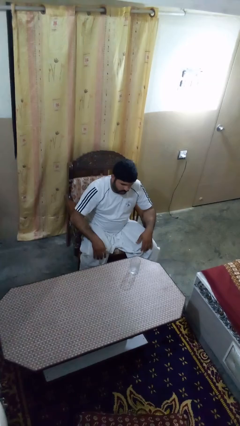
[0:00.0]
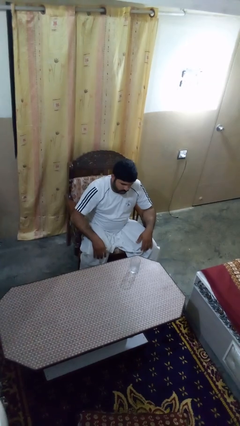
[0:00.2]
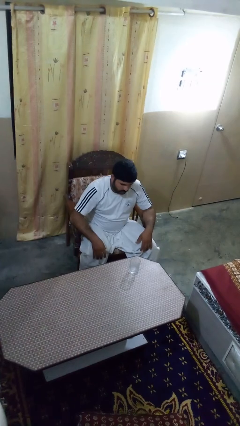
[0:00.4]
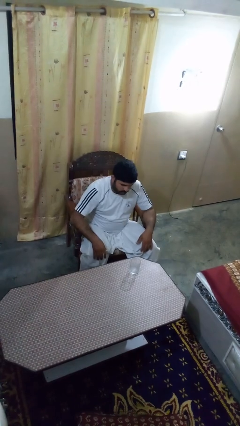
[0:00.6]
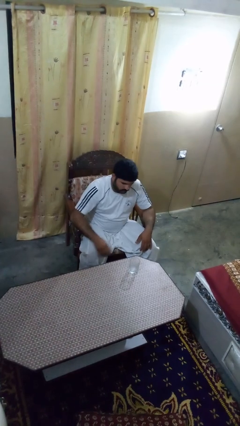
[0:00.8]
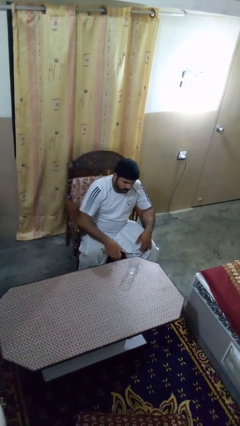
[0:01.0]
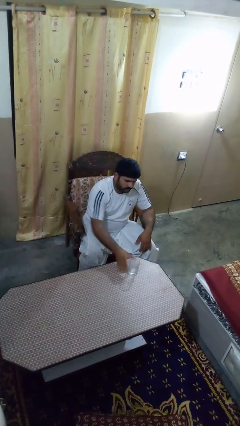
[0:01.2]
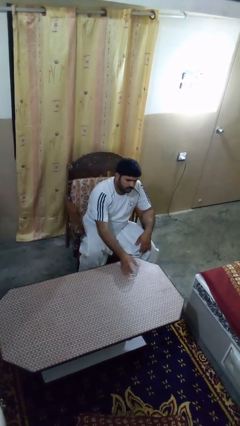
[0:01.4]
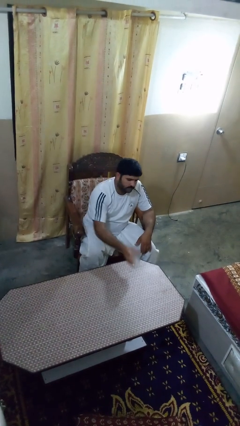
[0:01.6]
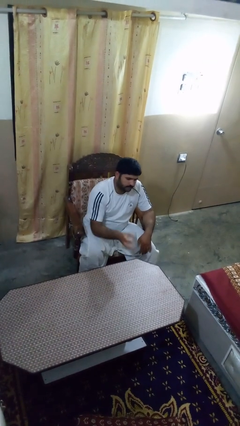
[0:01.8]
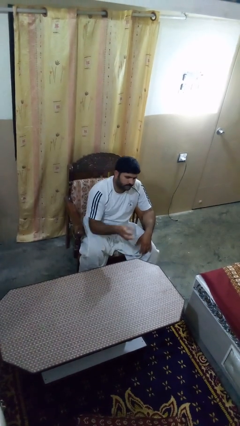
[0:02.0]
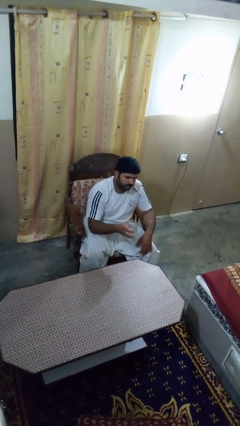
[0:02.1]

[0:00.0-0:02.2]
person picks up object from table

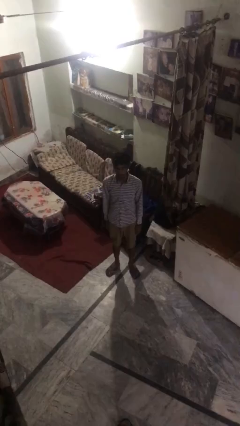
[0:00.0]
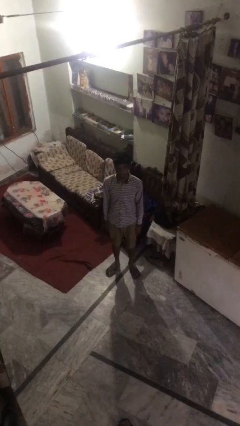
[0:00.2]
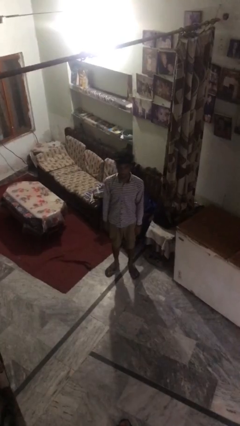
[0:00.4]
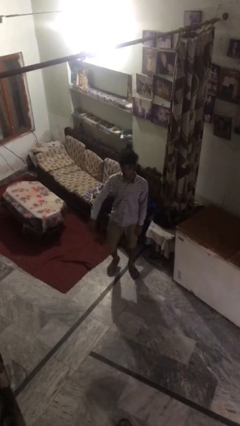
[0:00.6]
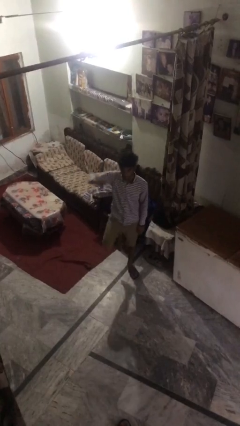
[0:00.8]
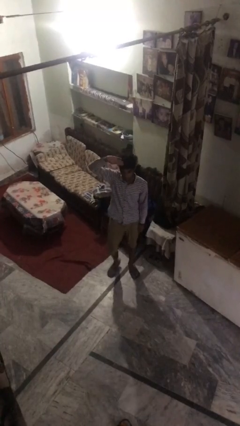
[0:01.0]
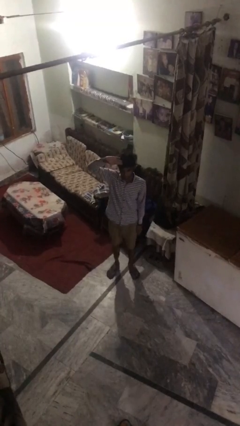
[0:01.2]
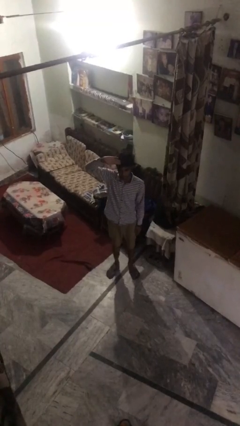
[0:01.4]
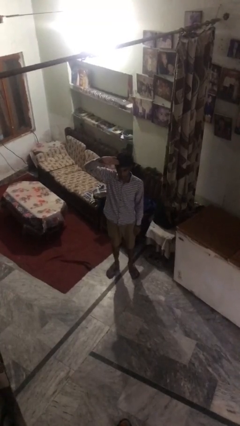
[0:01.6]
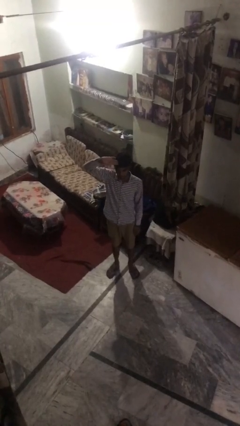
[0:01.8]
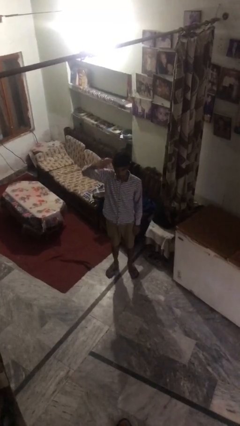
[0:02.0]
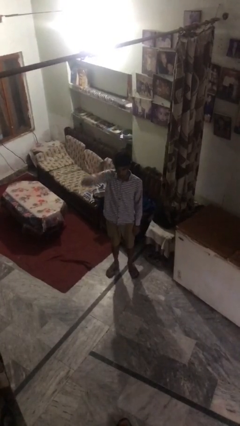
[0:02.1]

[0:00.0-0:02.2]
person salutes

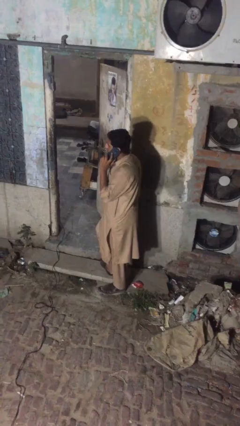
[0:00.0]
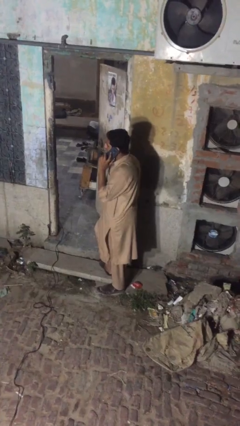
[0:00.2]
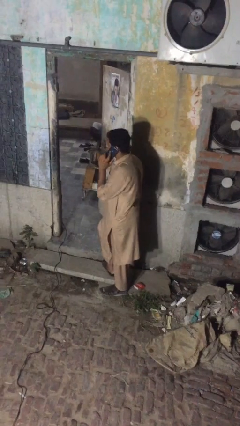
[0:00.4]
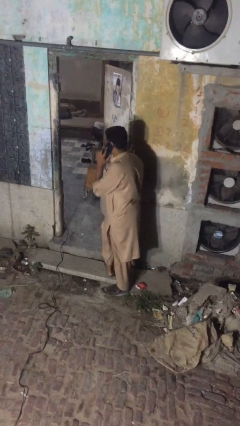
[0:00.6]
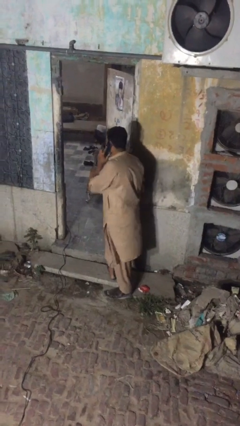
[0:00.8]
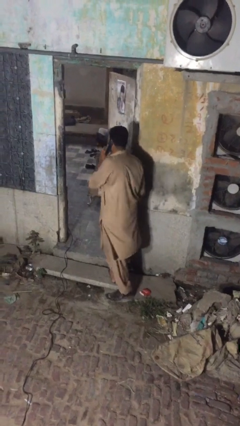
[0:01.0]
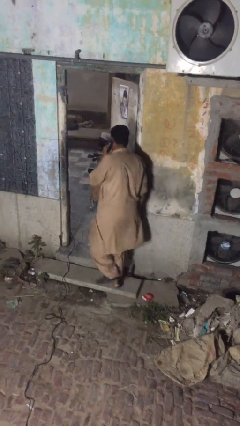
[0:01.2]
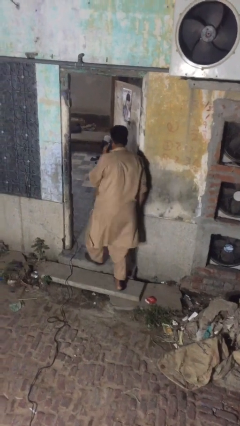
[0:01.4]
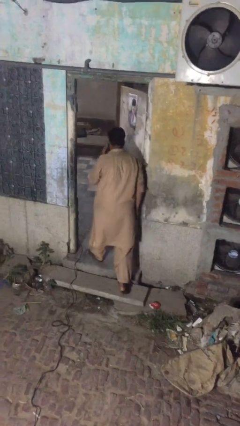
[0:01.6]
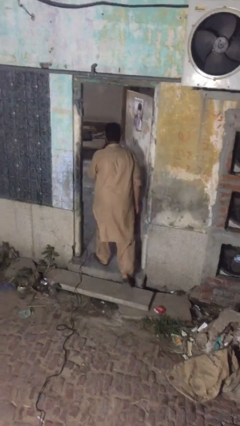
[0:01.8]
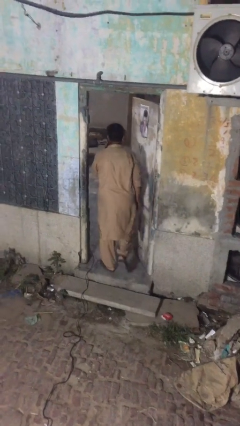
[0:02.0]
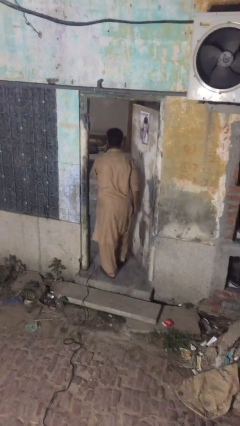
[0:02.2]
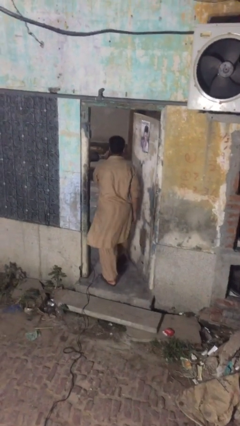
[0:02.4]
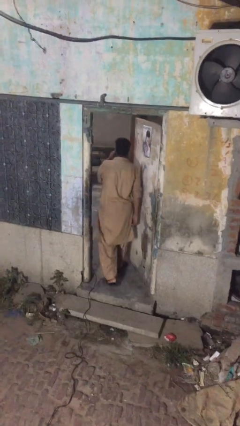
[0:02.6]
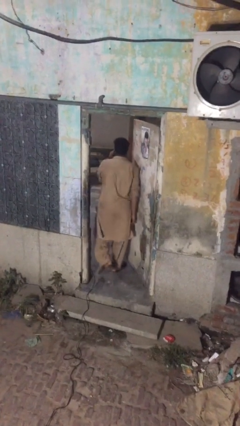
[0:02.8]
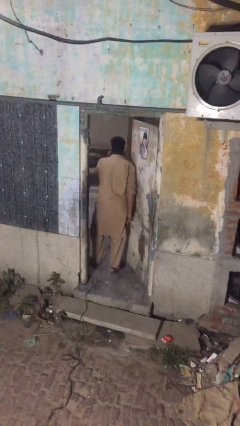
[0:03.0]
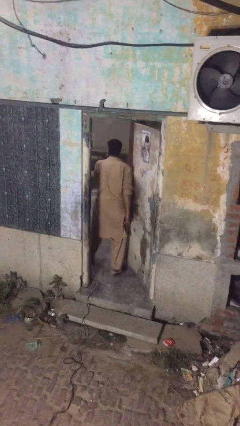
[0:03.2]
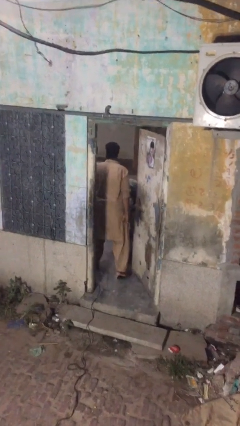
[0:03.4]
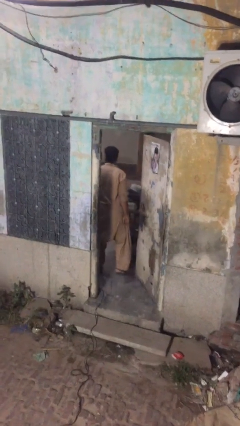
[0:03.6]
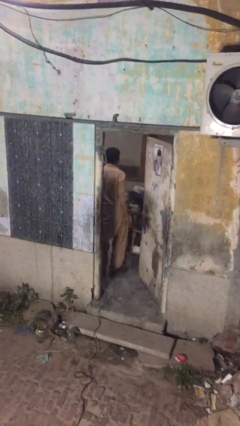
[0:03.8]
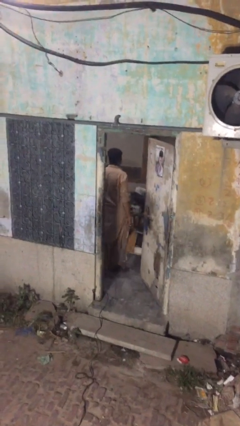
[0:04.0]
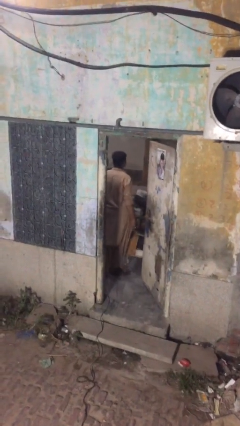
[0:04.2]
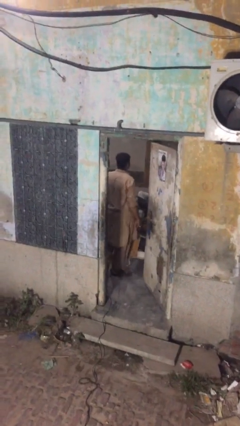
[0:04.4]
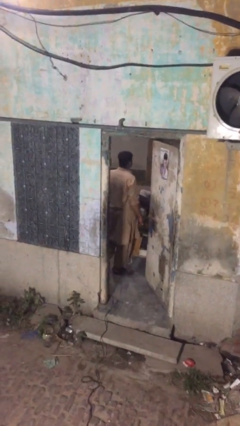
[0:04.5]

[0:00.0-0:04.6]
person exits scene through structure

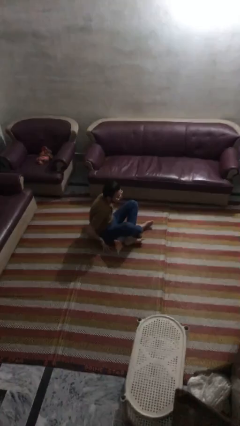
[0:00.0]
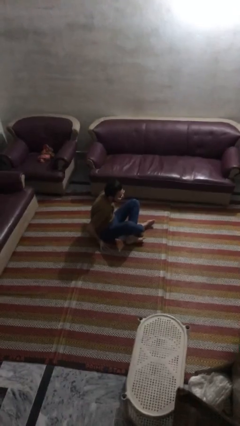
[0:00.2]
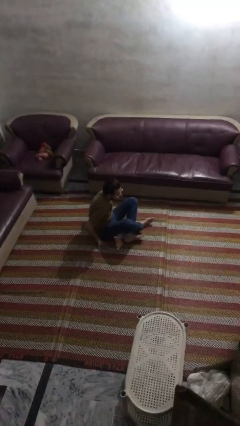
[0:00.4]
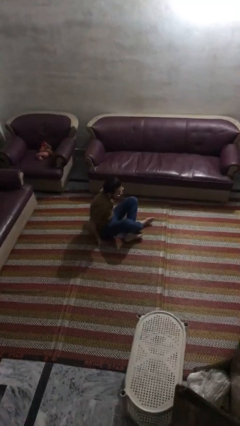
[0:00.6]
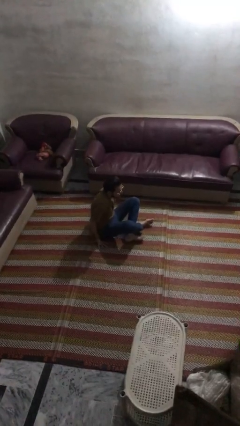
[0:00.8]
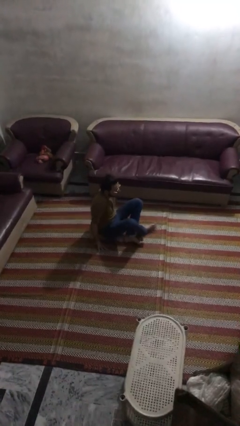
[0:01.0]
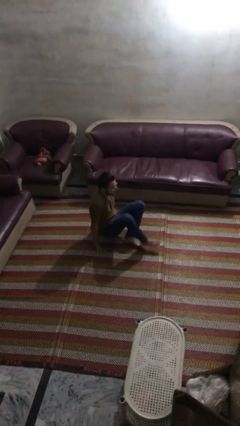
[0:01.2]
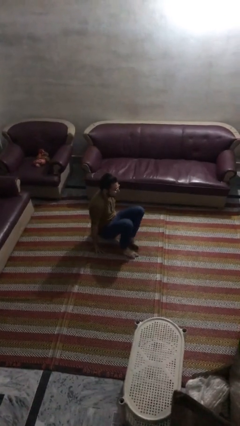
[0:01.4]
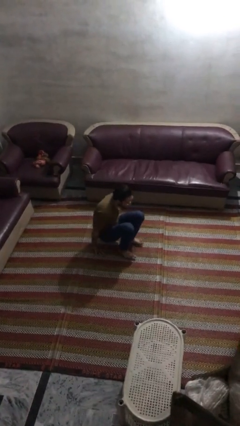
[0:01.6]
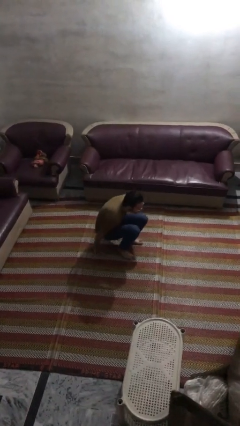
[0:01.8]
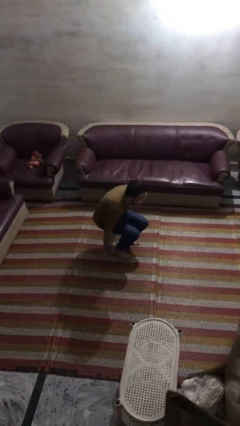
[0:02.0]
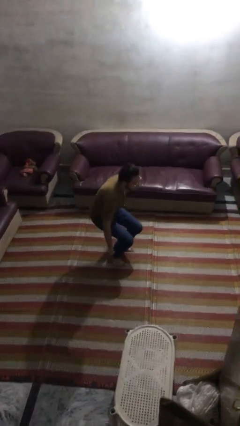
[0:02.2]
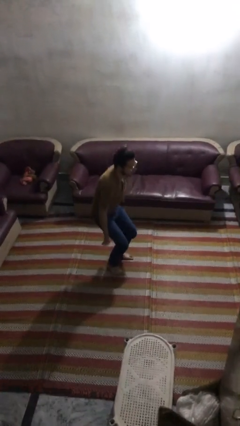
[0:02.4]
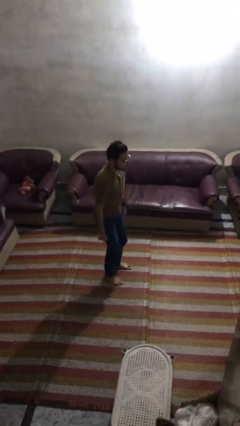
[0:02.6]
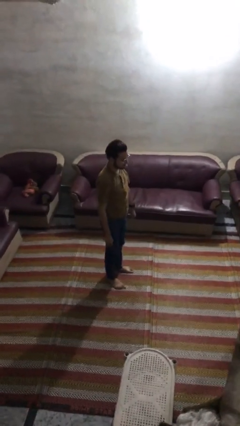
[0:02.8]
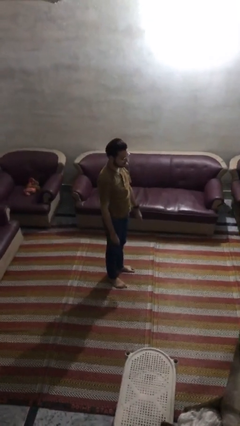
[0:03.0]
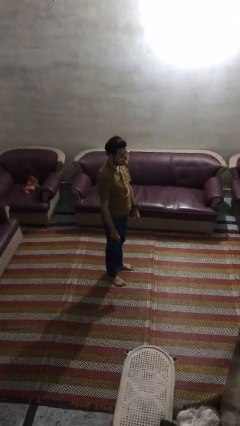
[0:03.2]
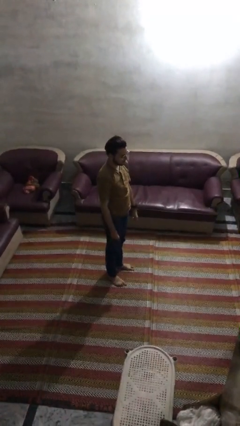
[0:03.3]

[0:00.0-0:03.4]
person stands up from floor

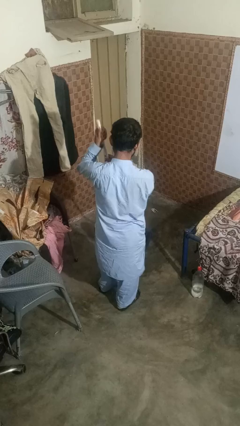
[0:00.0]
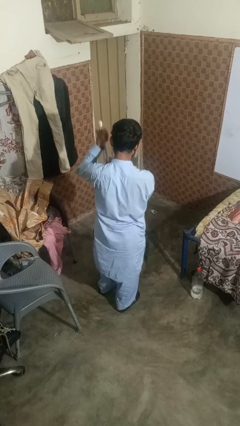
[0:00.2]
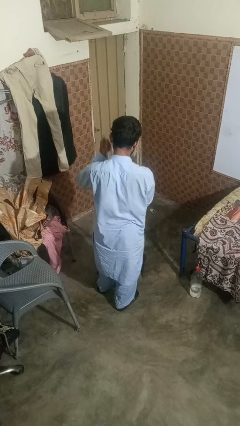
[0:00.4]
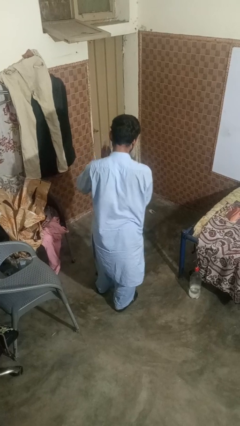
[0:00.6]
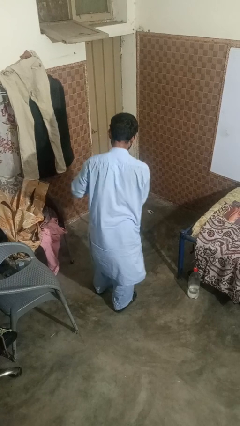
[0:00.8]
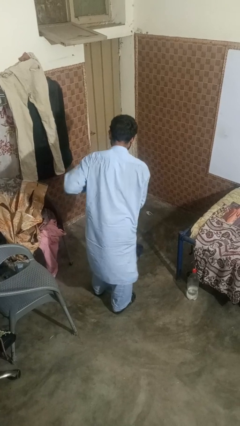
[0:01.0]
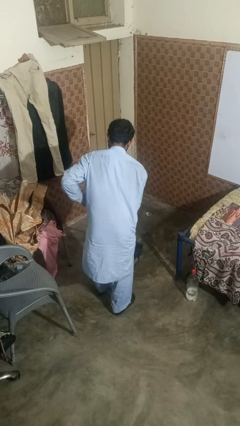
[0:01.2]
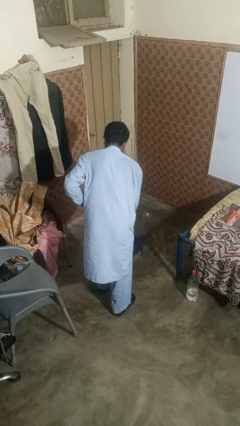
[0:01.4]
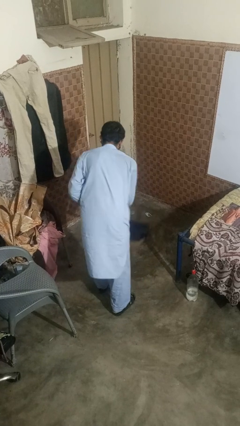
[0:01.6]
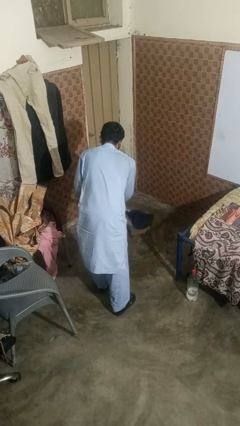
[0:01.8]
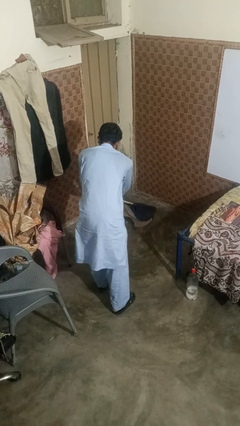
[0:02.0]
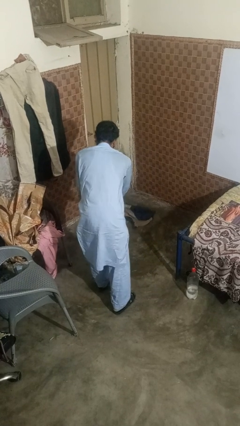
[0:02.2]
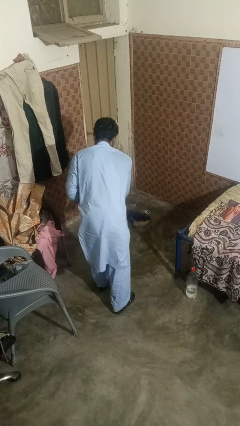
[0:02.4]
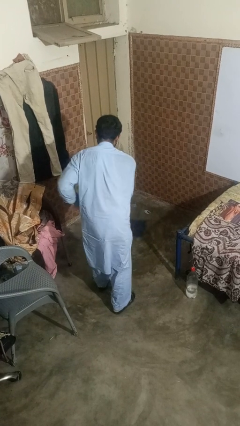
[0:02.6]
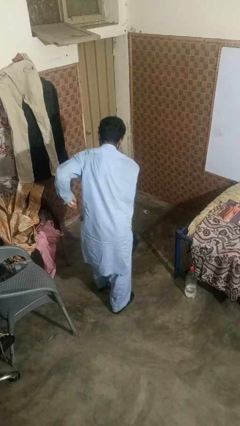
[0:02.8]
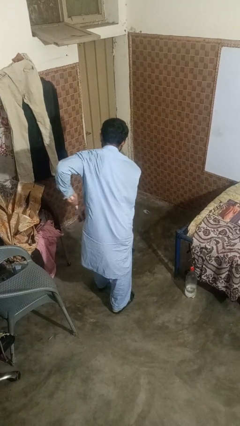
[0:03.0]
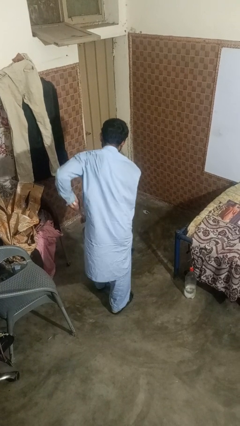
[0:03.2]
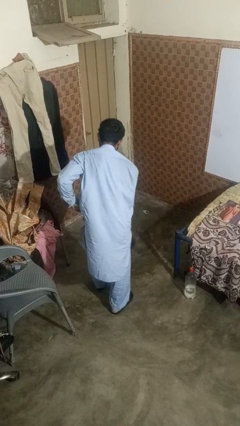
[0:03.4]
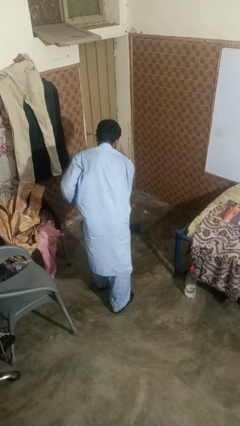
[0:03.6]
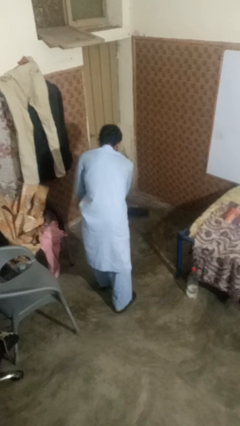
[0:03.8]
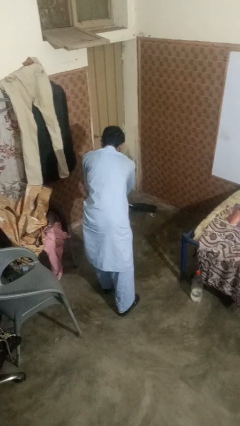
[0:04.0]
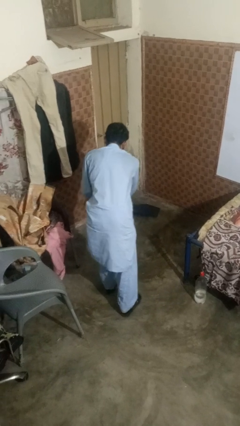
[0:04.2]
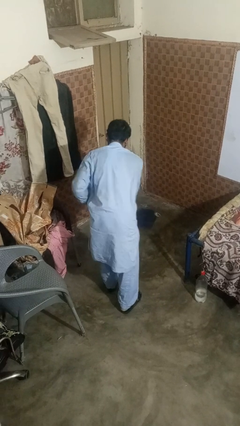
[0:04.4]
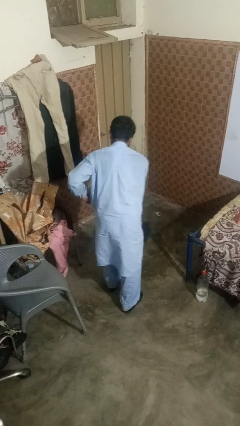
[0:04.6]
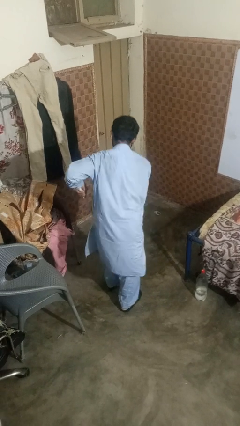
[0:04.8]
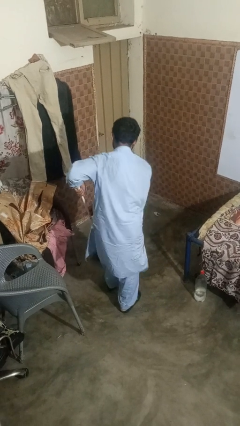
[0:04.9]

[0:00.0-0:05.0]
person mops
